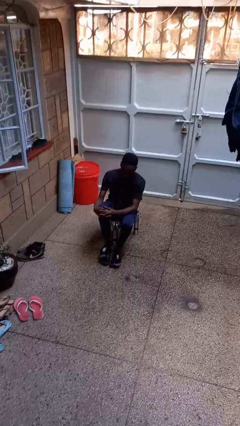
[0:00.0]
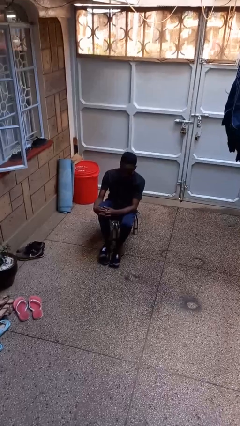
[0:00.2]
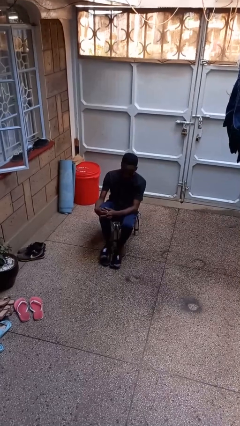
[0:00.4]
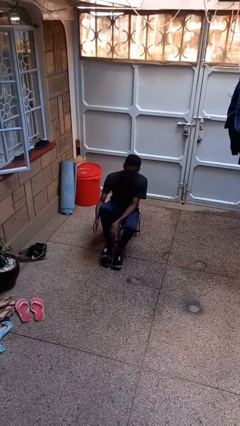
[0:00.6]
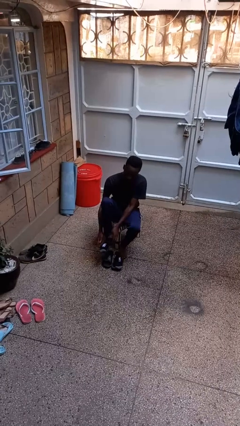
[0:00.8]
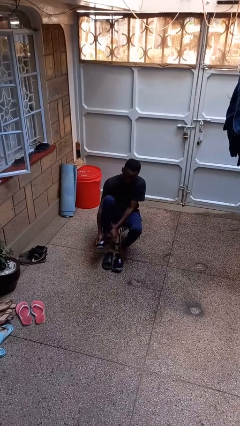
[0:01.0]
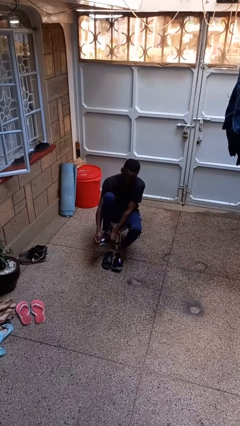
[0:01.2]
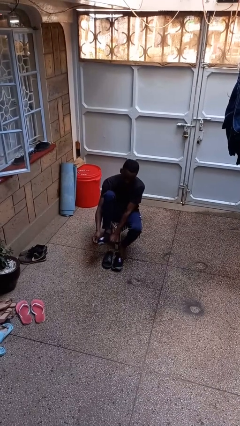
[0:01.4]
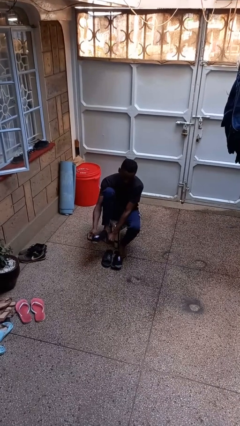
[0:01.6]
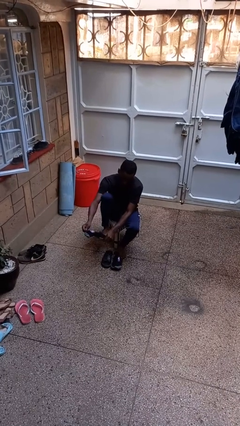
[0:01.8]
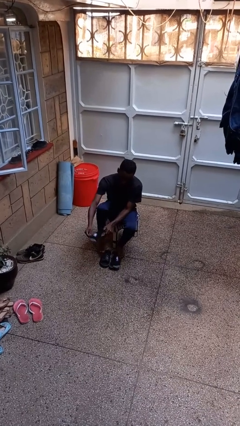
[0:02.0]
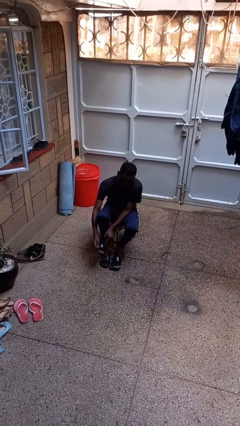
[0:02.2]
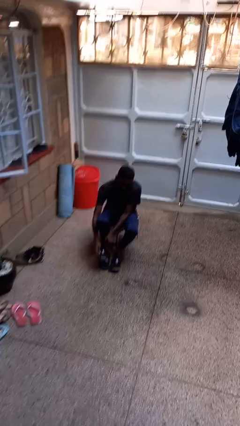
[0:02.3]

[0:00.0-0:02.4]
person takes off socks

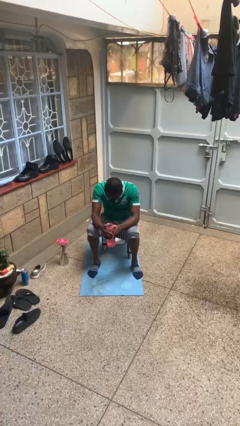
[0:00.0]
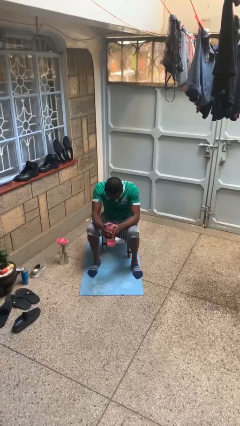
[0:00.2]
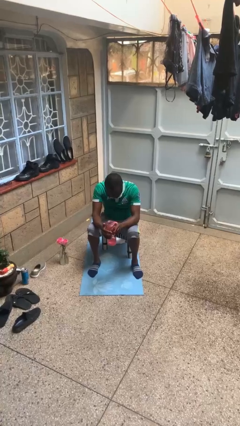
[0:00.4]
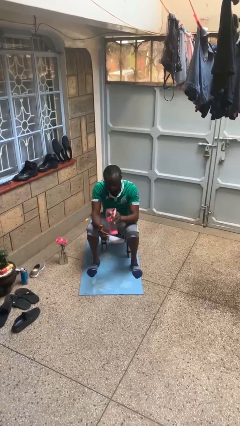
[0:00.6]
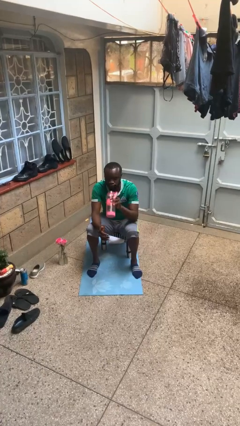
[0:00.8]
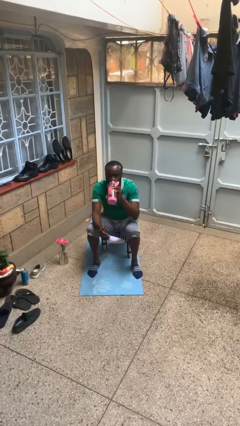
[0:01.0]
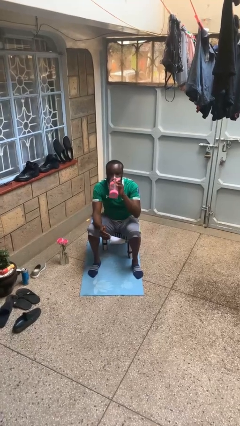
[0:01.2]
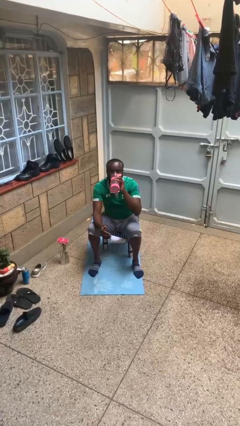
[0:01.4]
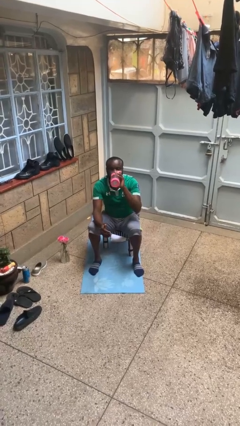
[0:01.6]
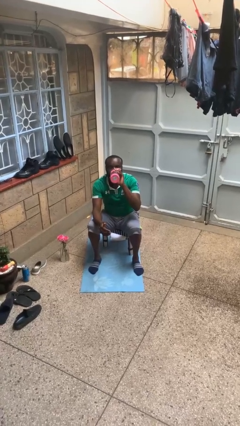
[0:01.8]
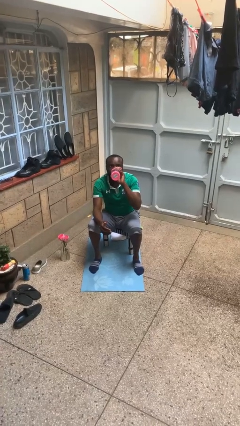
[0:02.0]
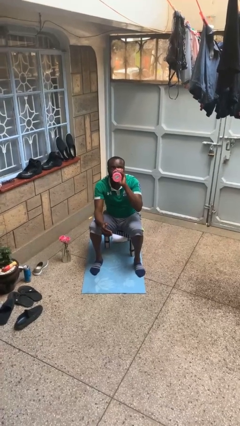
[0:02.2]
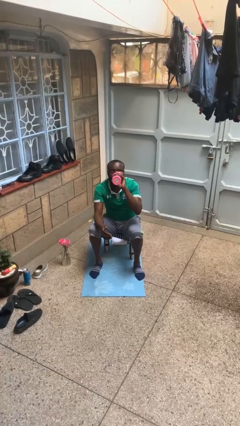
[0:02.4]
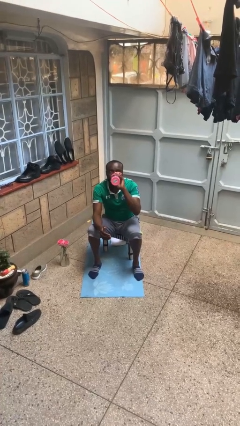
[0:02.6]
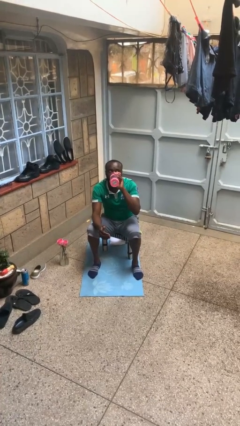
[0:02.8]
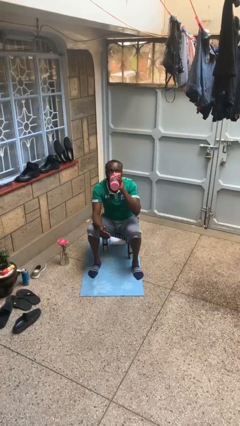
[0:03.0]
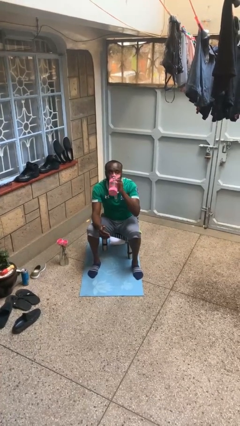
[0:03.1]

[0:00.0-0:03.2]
person drinks from bottle

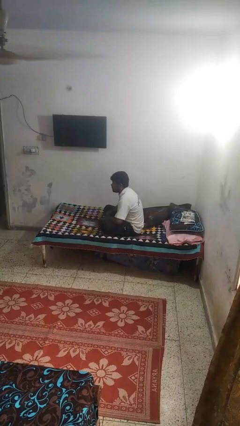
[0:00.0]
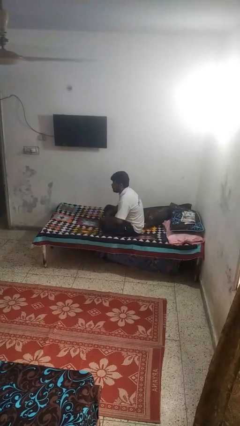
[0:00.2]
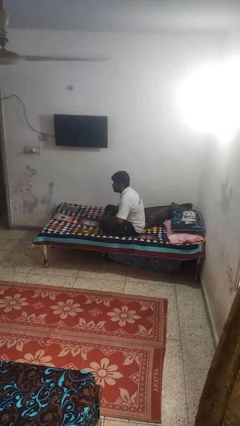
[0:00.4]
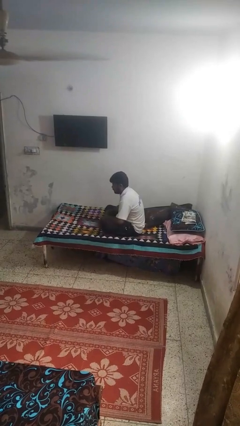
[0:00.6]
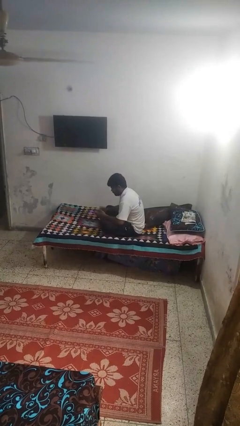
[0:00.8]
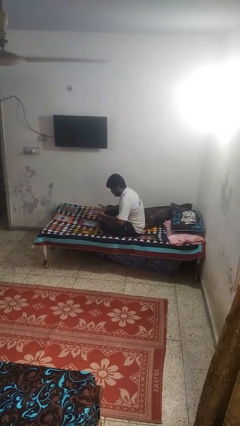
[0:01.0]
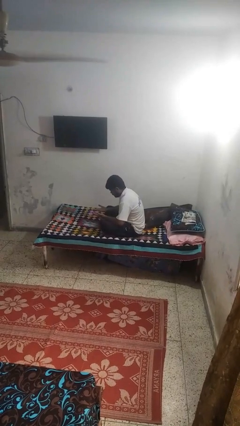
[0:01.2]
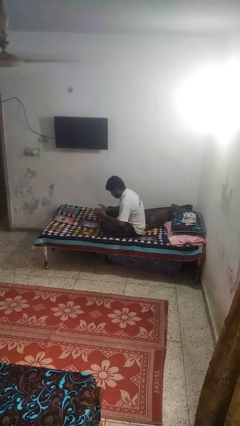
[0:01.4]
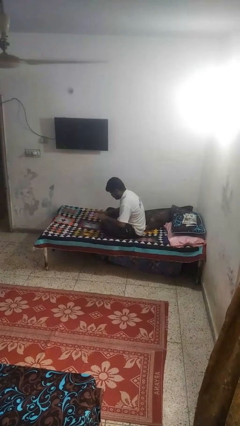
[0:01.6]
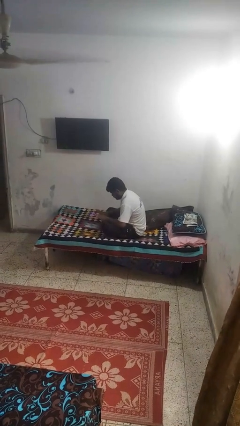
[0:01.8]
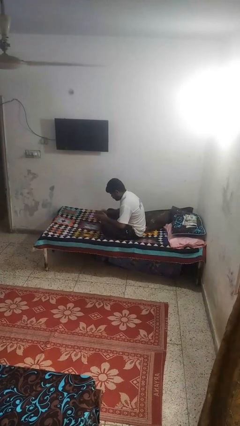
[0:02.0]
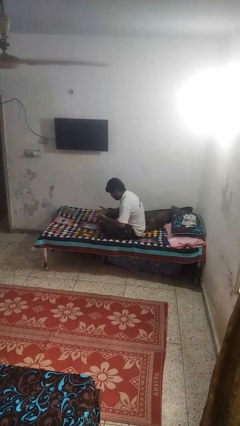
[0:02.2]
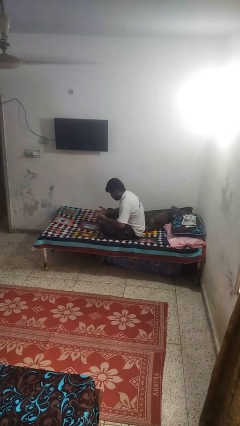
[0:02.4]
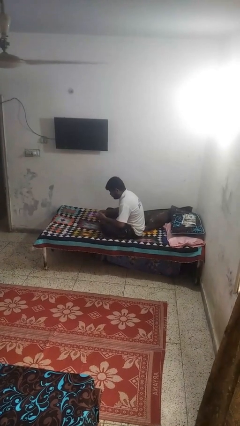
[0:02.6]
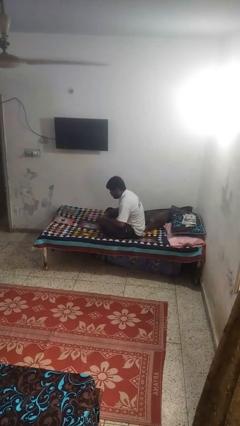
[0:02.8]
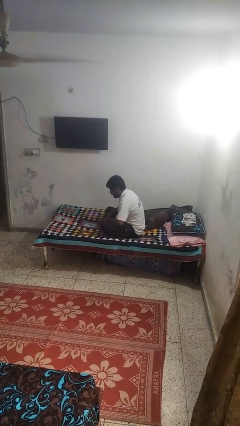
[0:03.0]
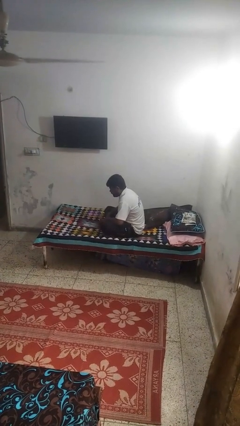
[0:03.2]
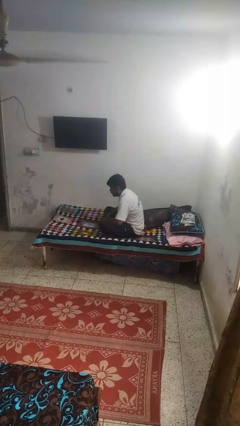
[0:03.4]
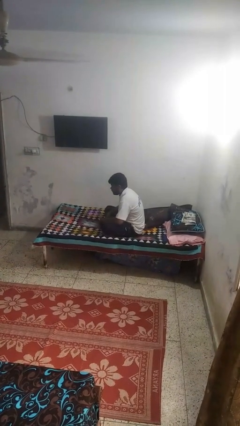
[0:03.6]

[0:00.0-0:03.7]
person looks at hands in lap

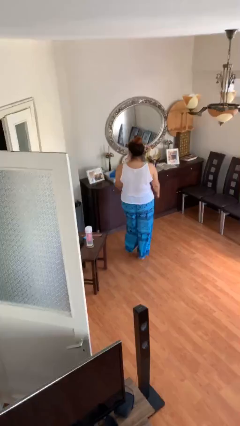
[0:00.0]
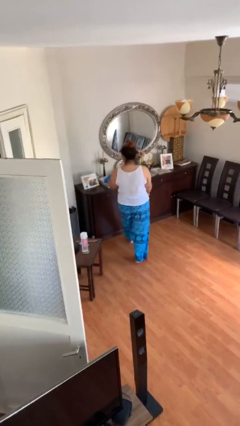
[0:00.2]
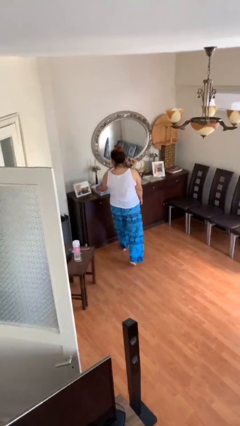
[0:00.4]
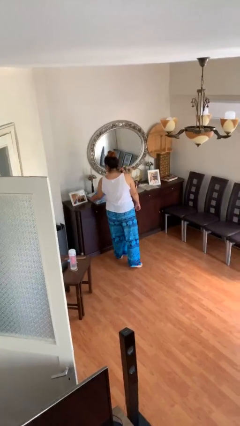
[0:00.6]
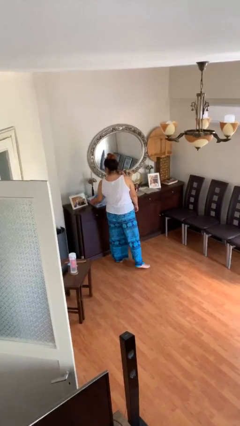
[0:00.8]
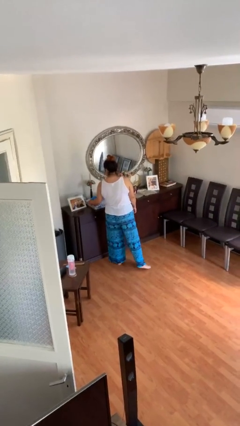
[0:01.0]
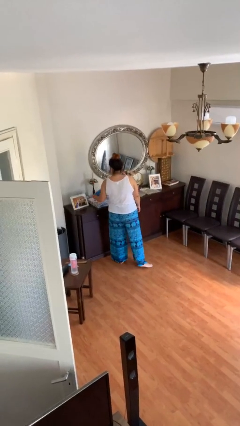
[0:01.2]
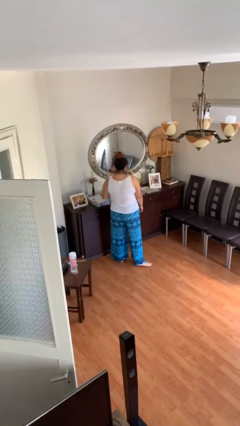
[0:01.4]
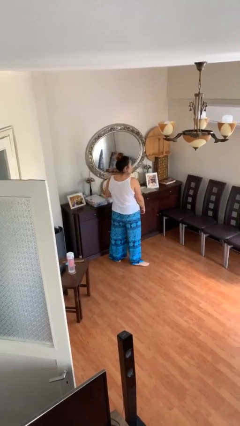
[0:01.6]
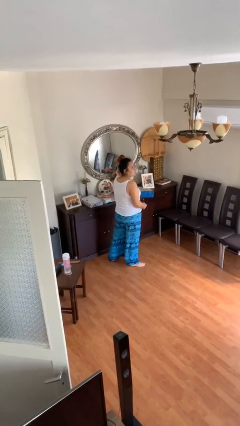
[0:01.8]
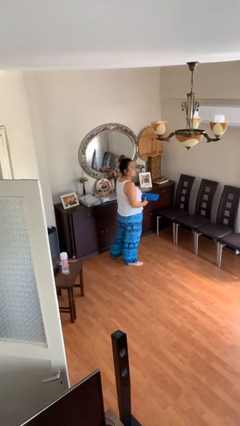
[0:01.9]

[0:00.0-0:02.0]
person picks up object from table

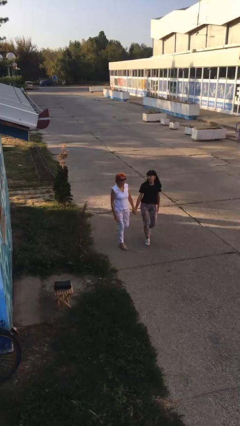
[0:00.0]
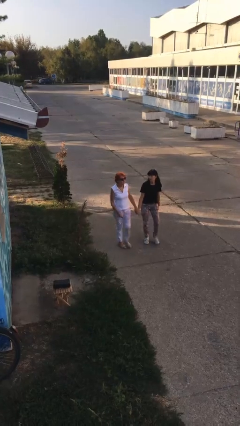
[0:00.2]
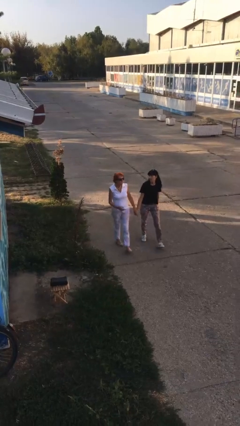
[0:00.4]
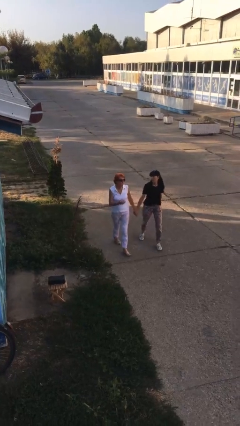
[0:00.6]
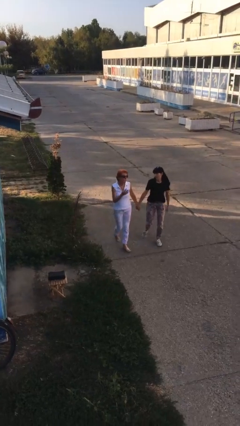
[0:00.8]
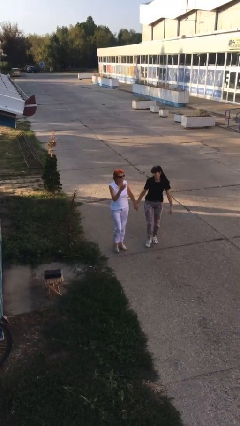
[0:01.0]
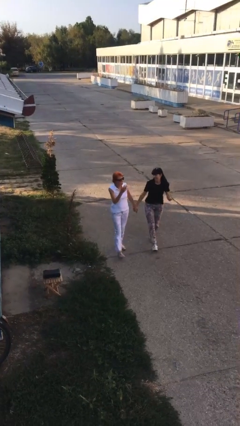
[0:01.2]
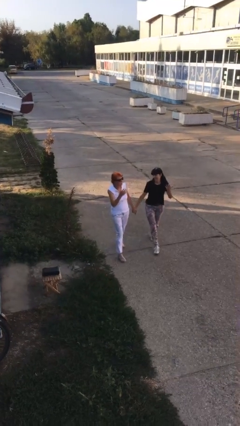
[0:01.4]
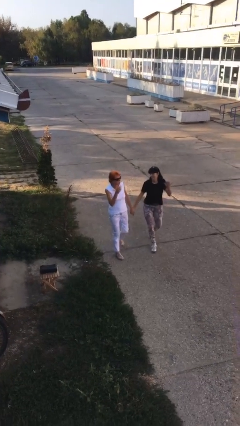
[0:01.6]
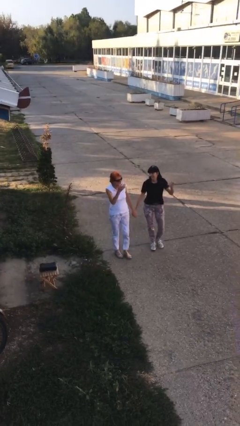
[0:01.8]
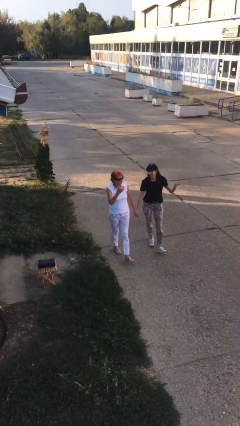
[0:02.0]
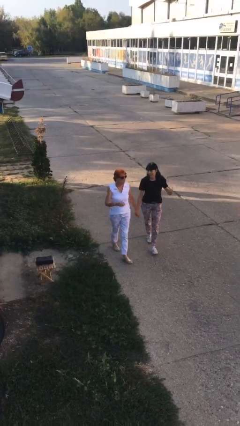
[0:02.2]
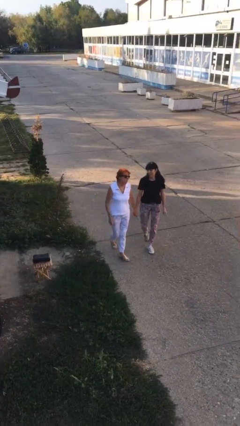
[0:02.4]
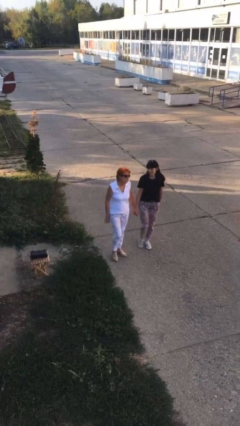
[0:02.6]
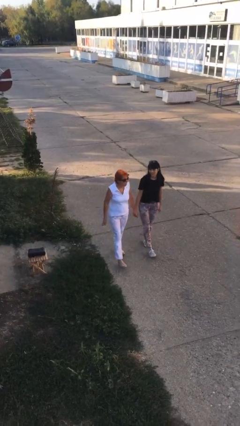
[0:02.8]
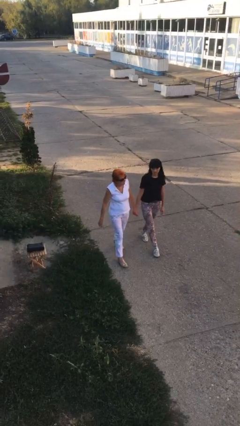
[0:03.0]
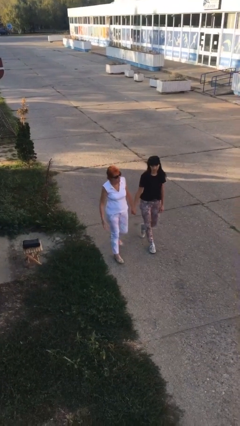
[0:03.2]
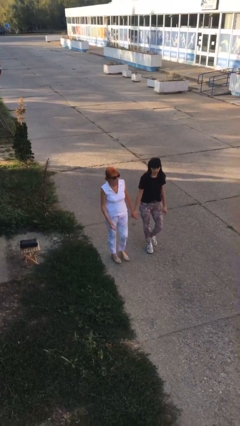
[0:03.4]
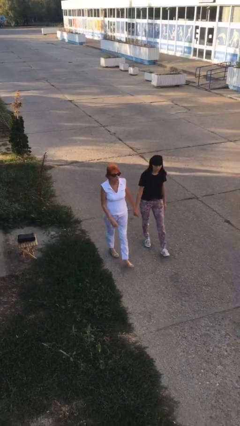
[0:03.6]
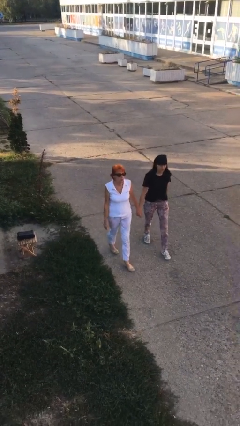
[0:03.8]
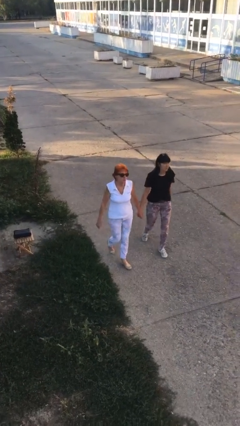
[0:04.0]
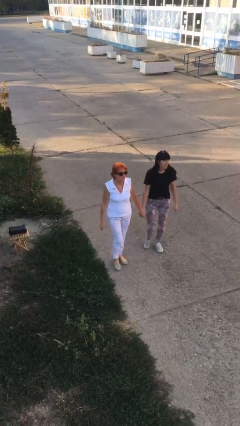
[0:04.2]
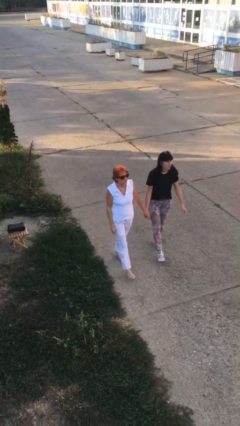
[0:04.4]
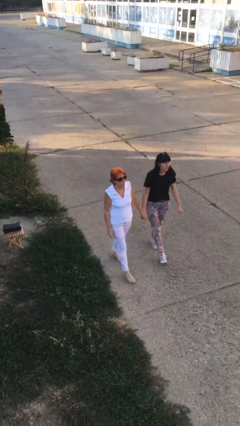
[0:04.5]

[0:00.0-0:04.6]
person holds hand

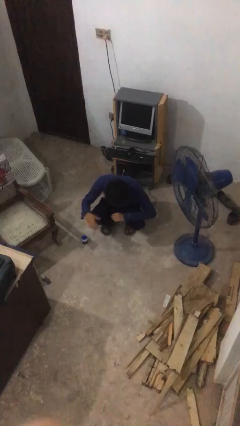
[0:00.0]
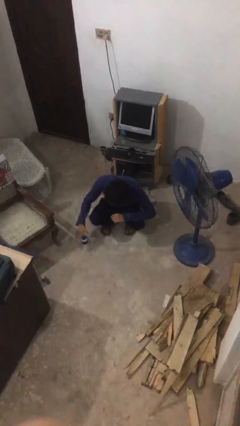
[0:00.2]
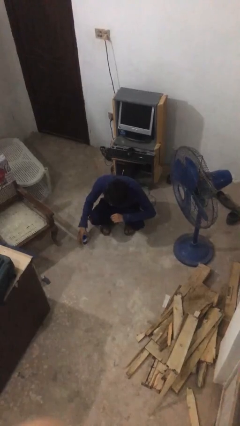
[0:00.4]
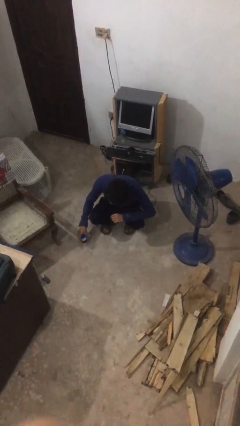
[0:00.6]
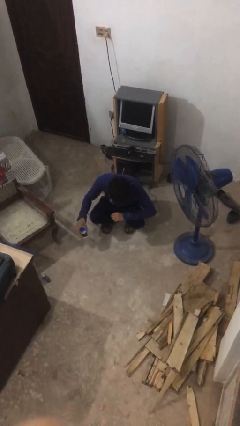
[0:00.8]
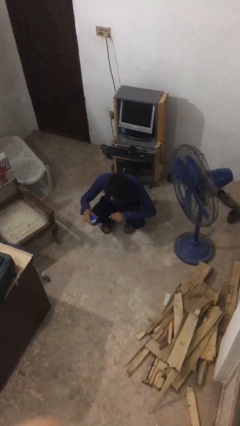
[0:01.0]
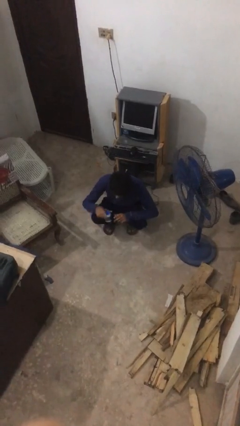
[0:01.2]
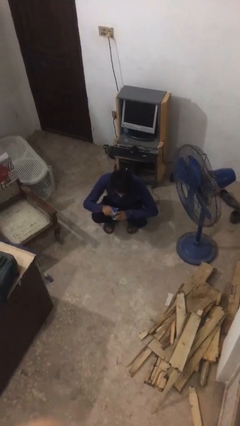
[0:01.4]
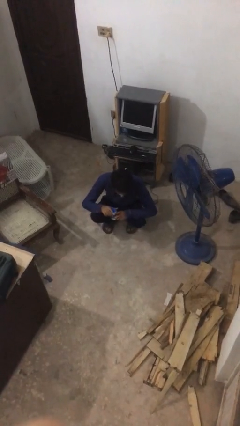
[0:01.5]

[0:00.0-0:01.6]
person picks up object from floor
